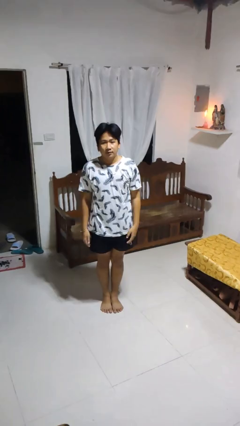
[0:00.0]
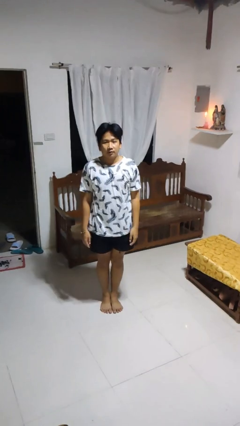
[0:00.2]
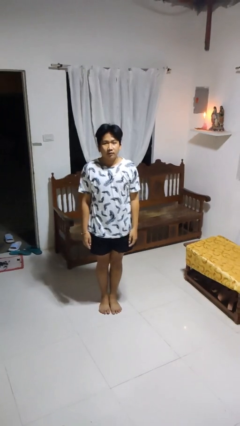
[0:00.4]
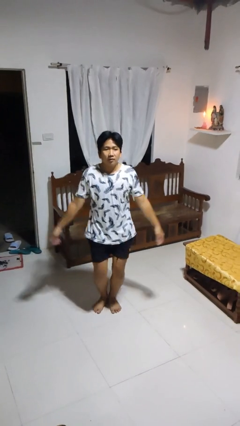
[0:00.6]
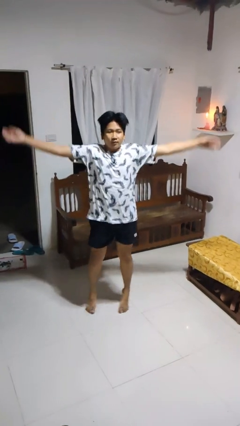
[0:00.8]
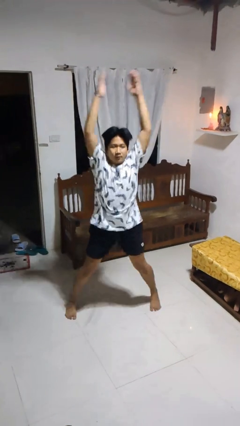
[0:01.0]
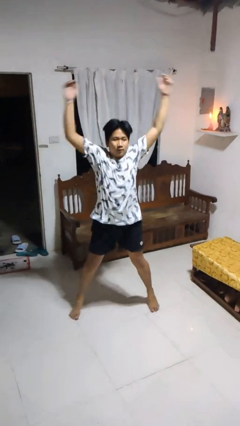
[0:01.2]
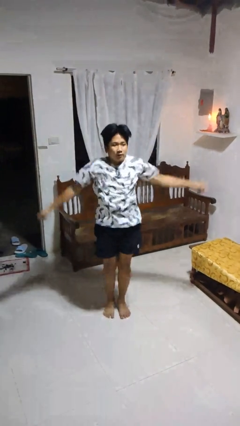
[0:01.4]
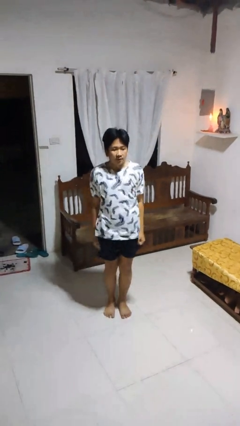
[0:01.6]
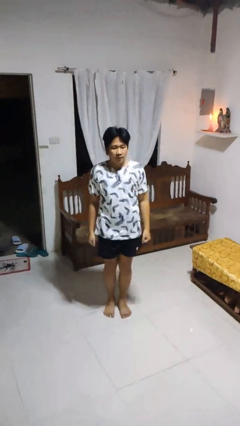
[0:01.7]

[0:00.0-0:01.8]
person exercises with jumping jacks

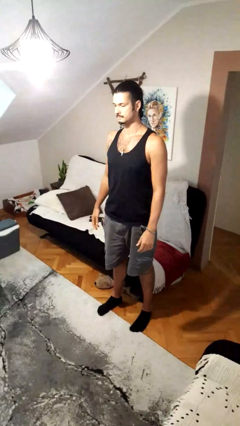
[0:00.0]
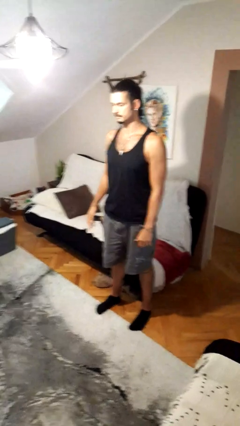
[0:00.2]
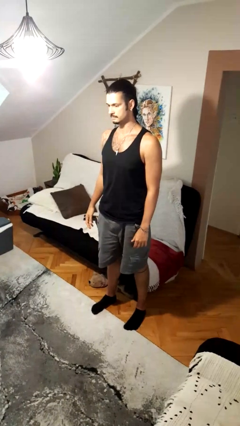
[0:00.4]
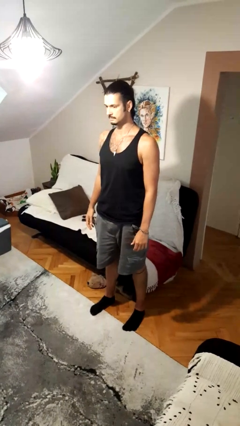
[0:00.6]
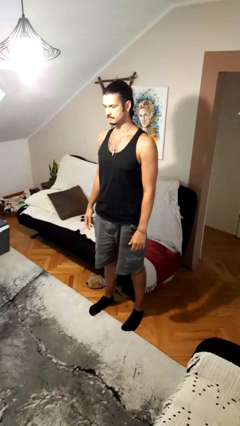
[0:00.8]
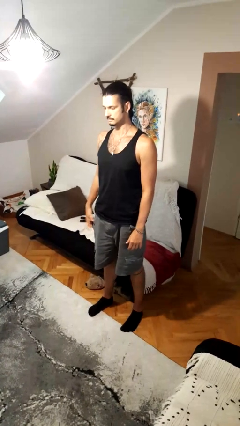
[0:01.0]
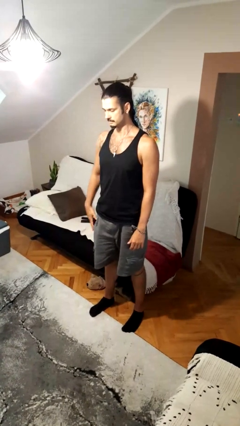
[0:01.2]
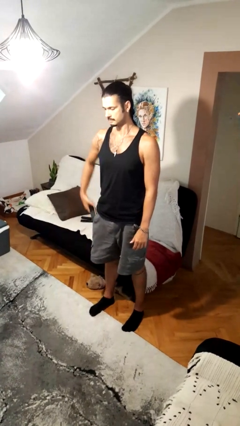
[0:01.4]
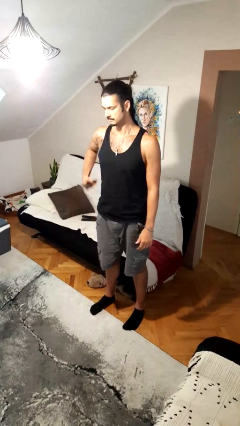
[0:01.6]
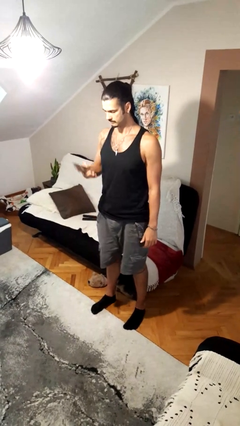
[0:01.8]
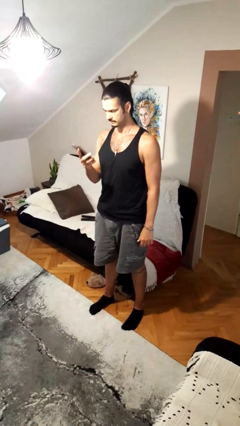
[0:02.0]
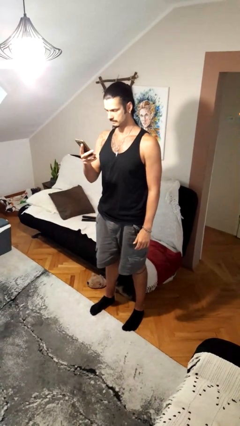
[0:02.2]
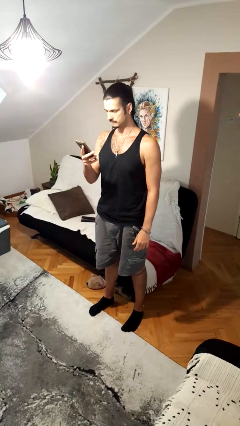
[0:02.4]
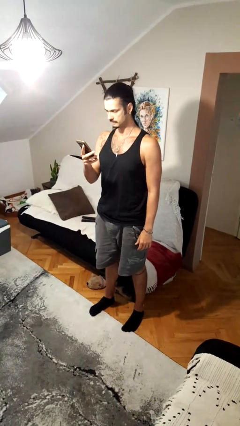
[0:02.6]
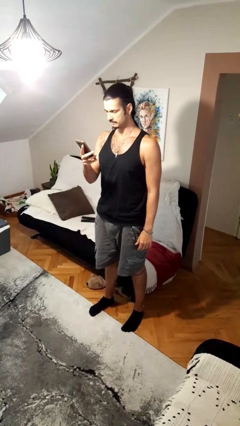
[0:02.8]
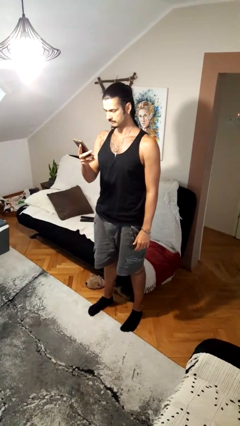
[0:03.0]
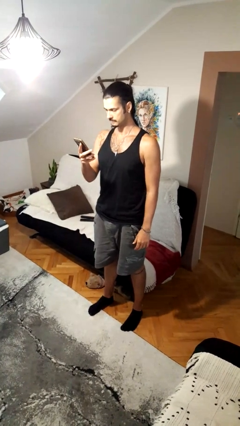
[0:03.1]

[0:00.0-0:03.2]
person takes phone from pocket

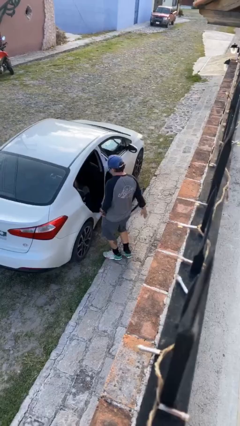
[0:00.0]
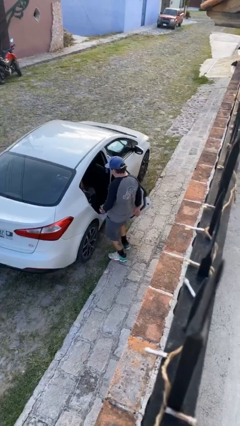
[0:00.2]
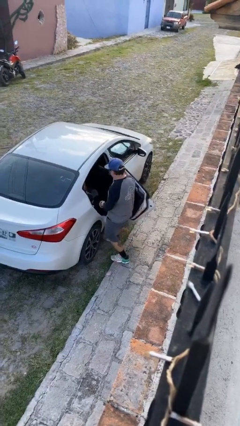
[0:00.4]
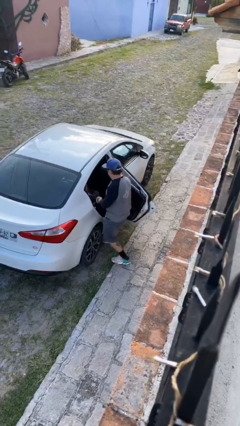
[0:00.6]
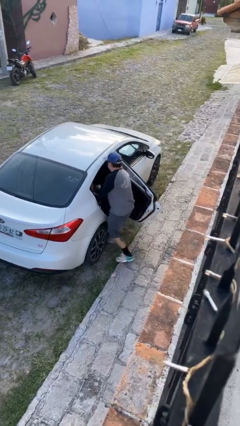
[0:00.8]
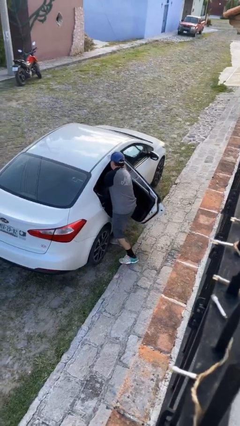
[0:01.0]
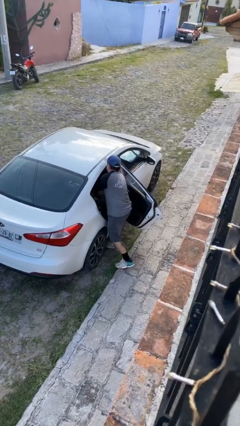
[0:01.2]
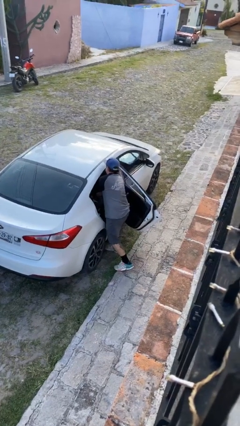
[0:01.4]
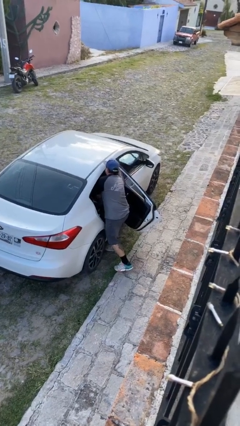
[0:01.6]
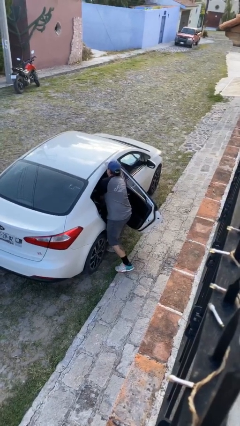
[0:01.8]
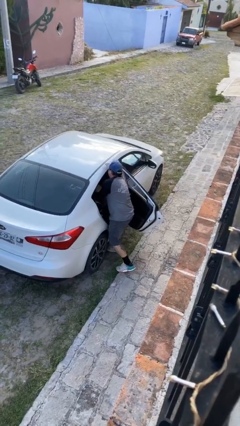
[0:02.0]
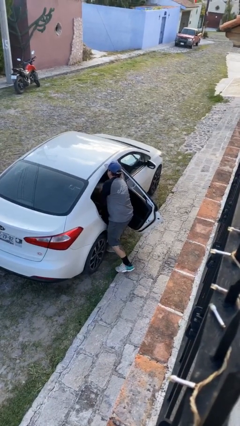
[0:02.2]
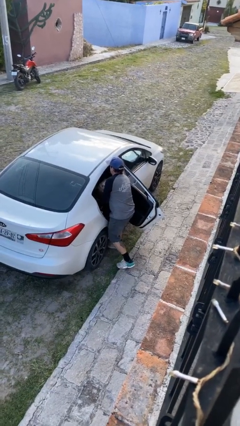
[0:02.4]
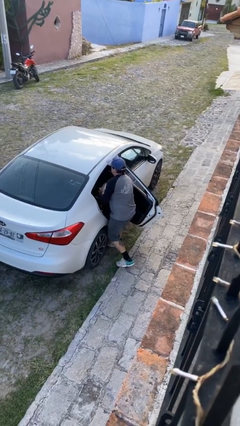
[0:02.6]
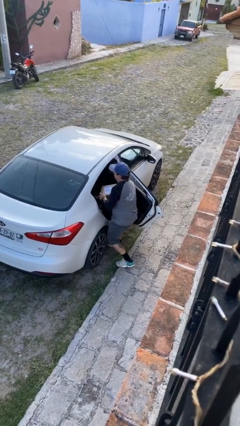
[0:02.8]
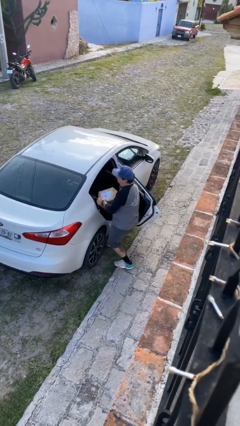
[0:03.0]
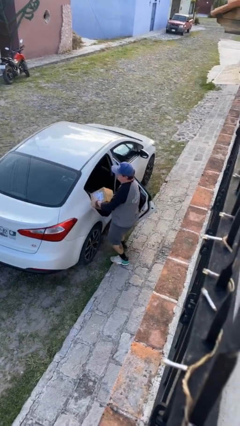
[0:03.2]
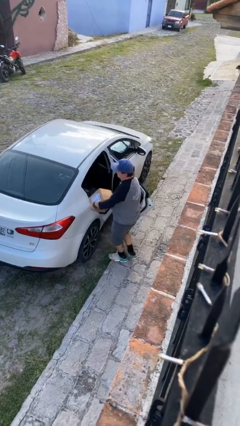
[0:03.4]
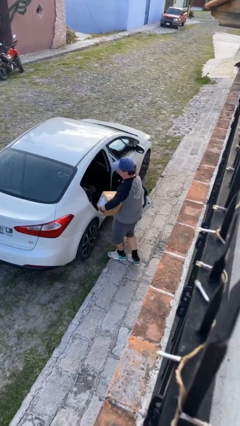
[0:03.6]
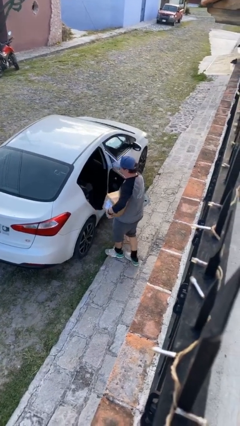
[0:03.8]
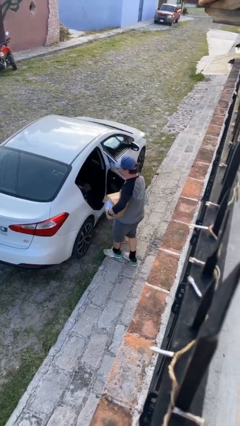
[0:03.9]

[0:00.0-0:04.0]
person unloads car

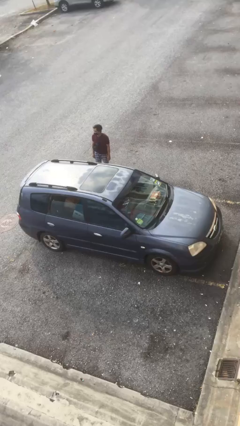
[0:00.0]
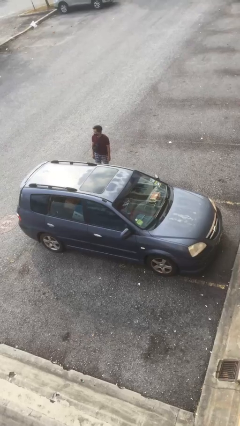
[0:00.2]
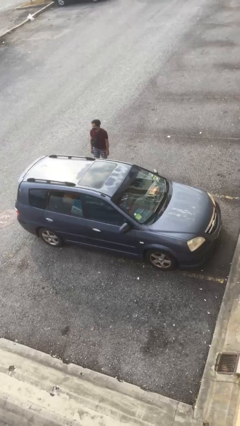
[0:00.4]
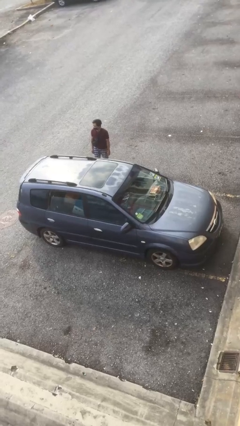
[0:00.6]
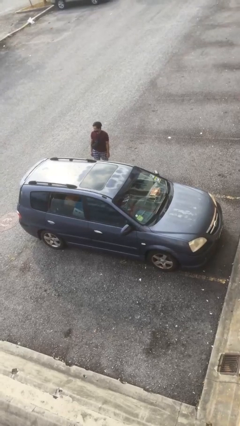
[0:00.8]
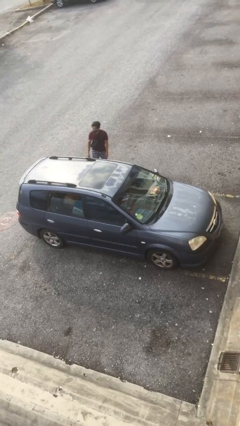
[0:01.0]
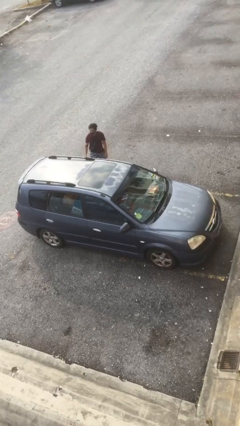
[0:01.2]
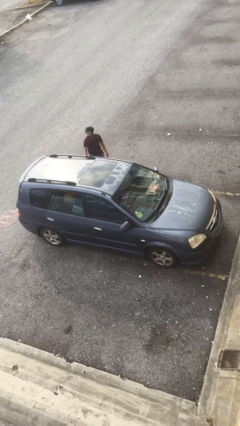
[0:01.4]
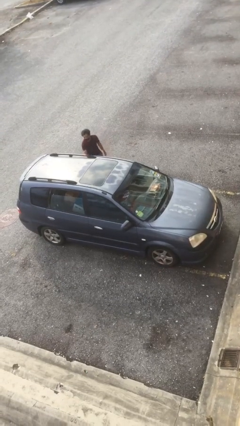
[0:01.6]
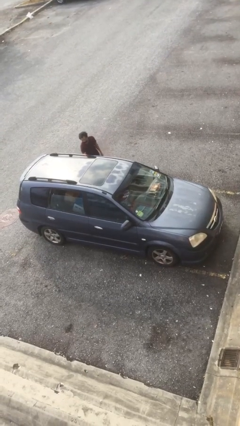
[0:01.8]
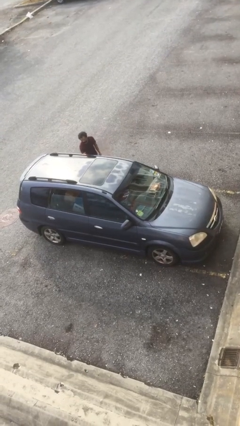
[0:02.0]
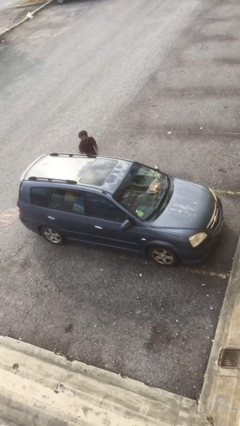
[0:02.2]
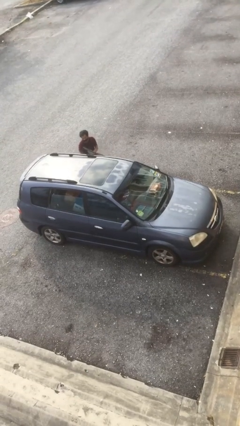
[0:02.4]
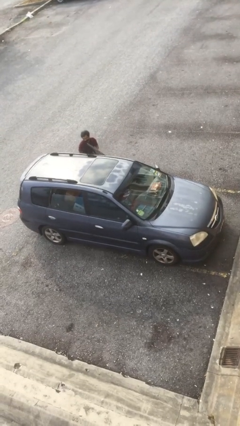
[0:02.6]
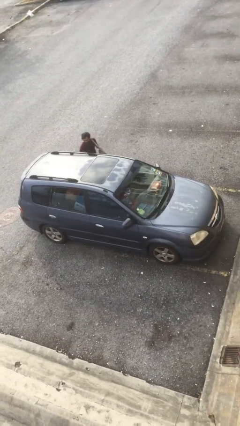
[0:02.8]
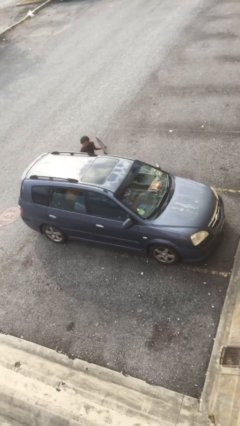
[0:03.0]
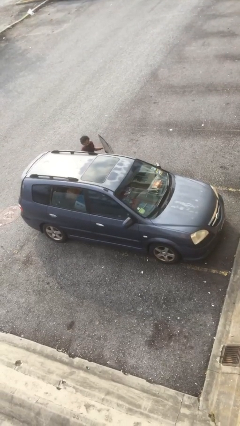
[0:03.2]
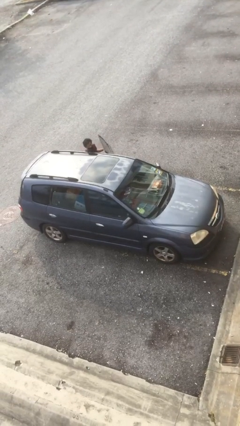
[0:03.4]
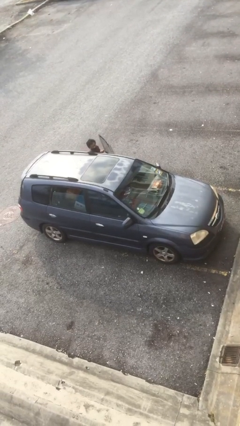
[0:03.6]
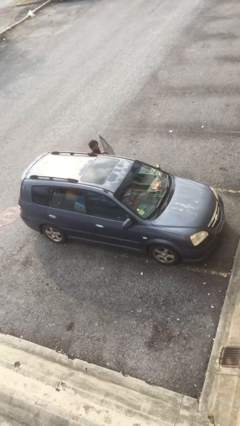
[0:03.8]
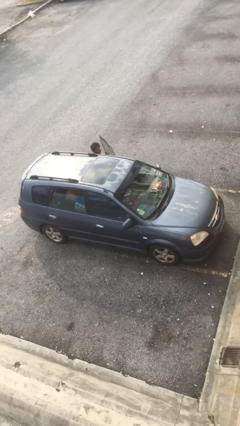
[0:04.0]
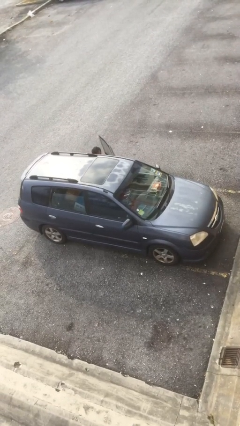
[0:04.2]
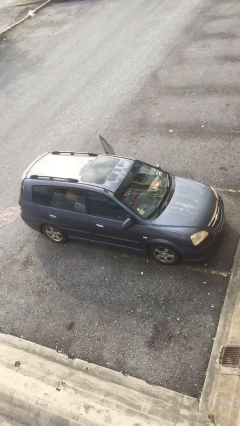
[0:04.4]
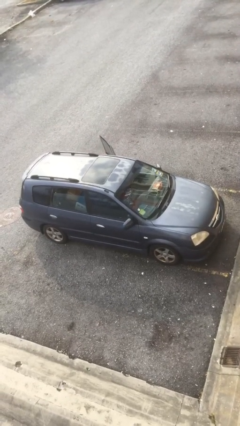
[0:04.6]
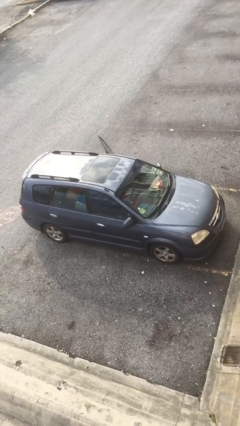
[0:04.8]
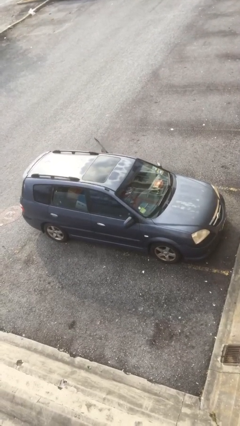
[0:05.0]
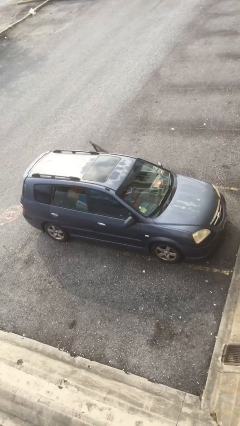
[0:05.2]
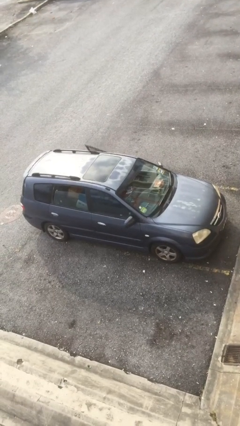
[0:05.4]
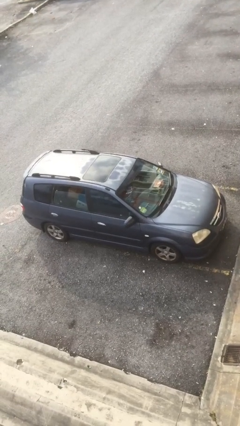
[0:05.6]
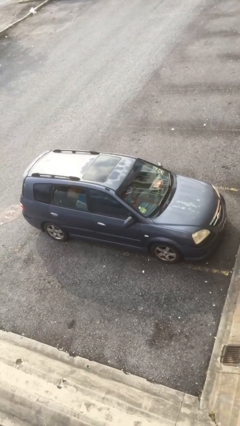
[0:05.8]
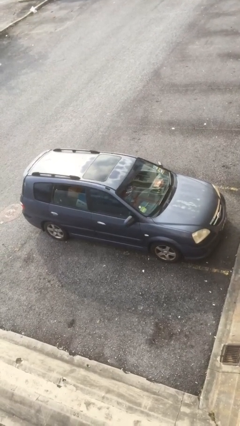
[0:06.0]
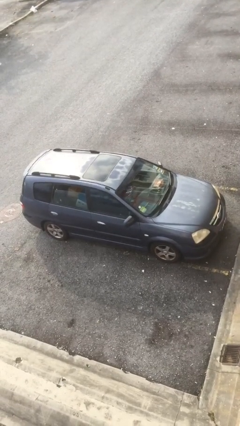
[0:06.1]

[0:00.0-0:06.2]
car picks up person

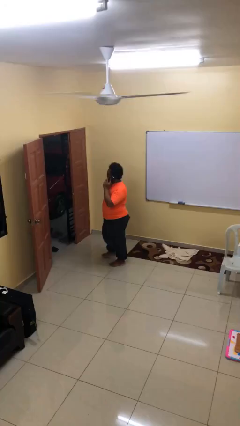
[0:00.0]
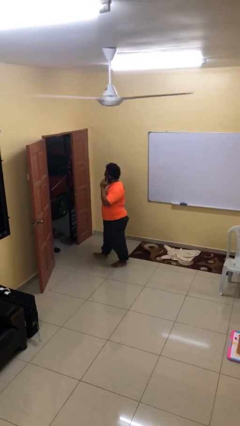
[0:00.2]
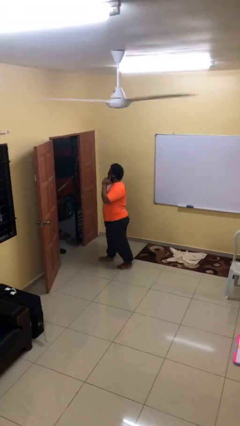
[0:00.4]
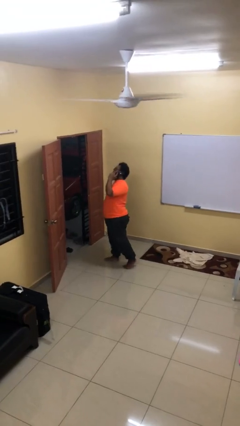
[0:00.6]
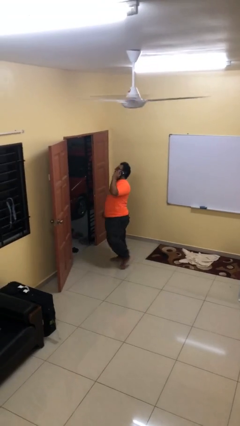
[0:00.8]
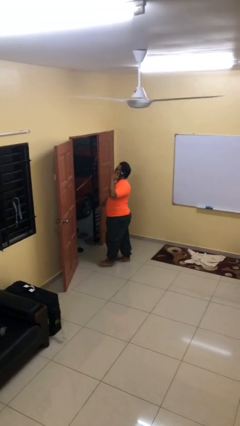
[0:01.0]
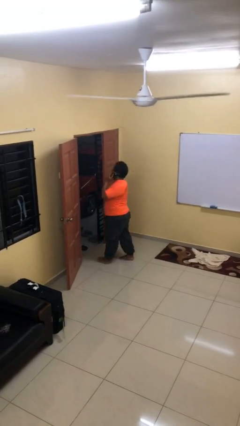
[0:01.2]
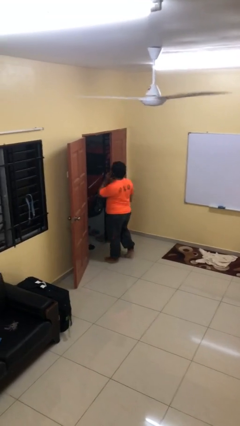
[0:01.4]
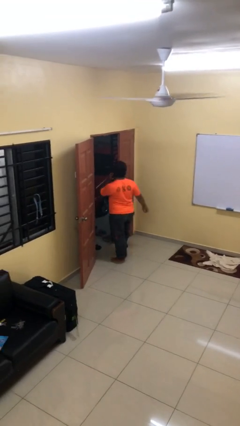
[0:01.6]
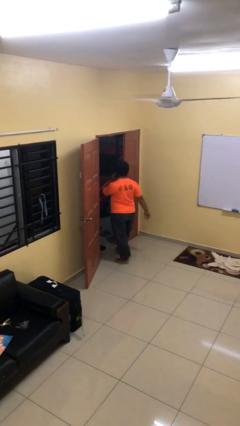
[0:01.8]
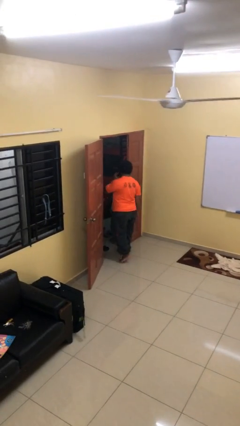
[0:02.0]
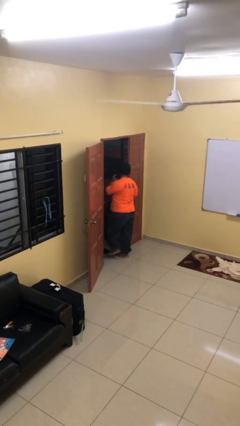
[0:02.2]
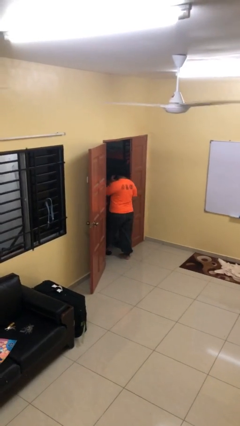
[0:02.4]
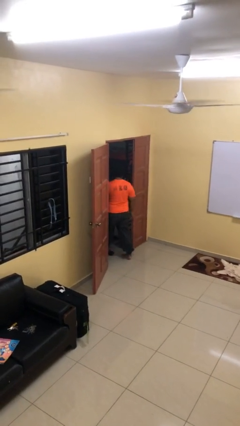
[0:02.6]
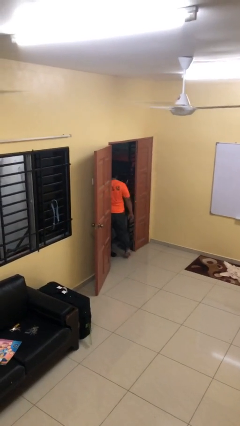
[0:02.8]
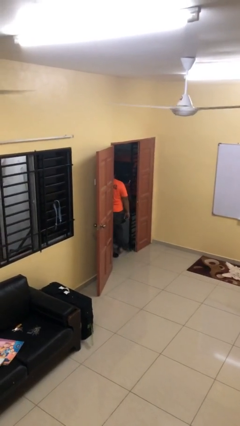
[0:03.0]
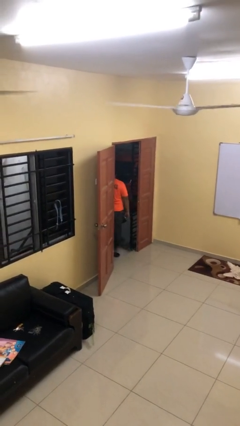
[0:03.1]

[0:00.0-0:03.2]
person exits scene through structure
